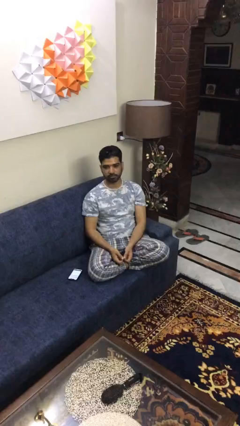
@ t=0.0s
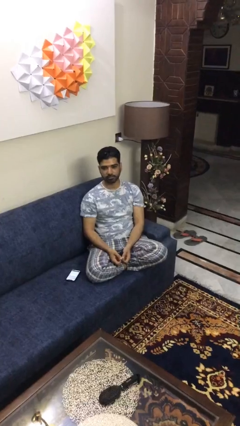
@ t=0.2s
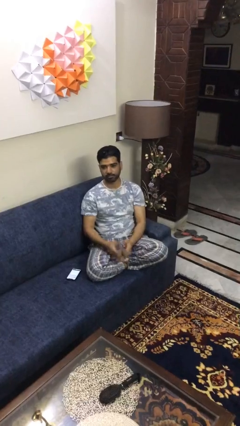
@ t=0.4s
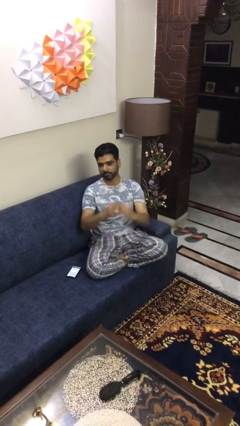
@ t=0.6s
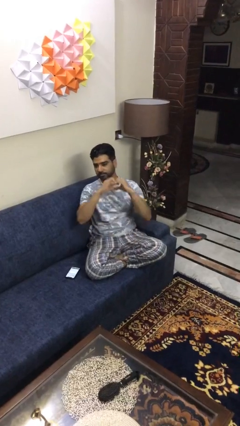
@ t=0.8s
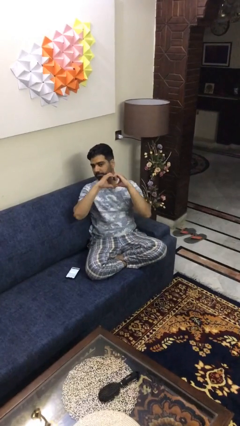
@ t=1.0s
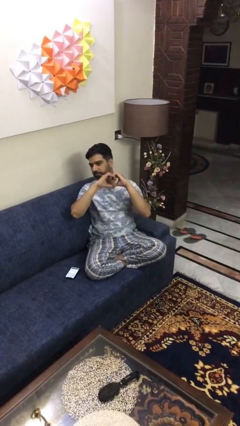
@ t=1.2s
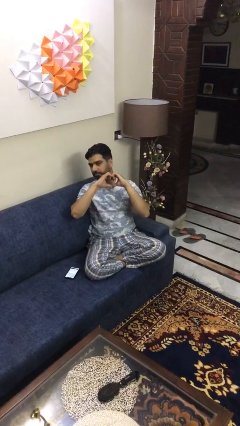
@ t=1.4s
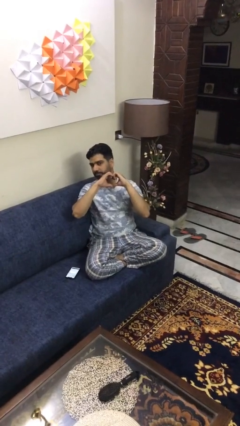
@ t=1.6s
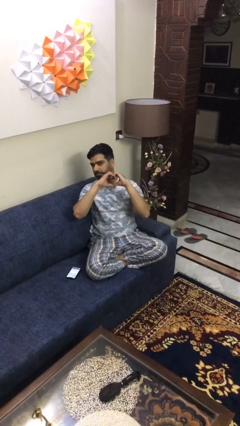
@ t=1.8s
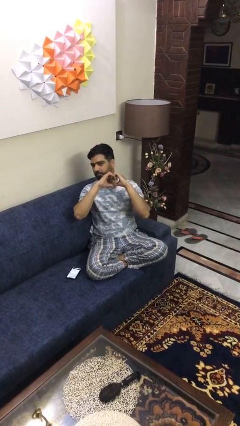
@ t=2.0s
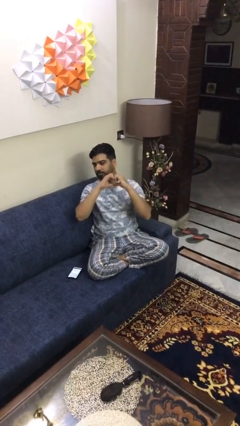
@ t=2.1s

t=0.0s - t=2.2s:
person gestures heart

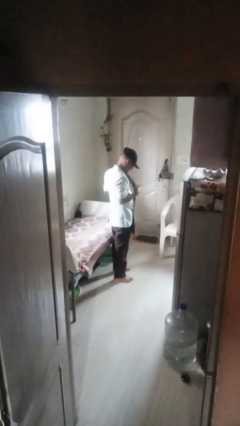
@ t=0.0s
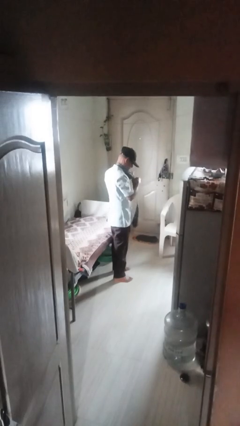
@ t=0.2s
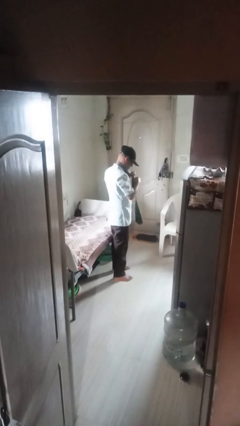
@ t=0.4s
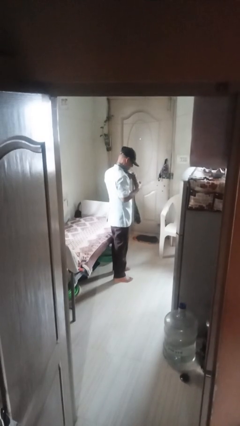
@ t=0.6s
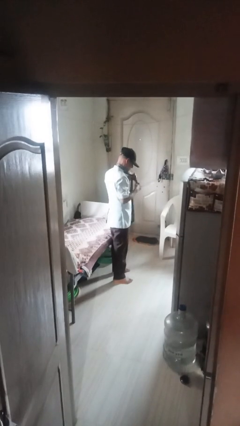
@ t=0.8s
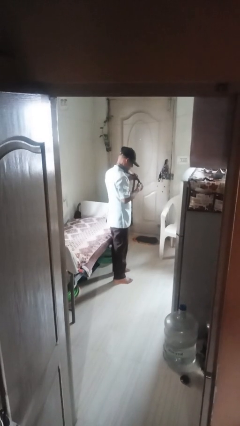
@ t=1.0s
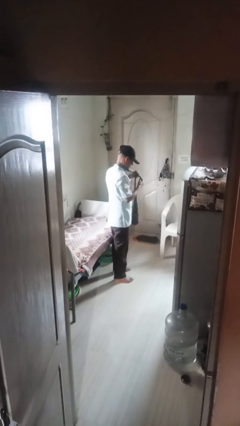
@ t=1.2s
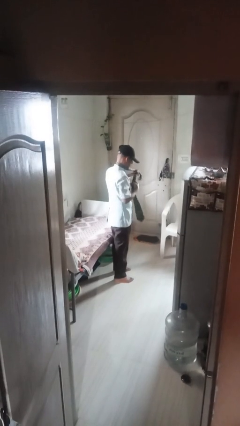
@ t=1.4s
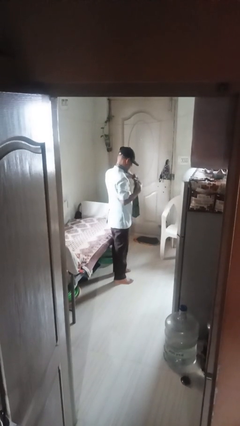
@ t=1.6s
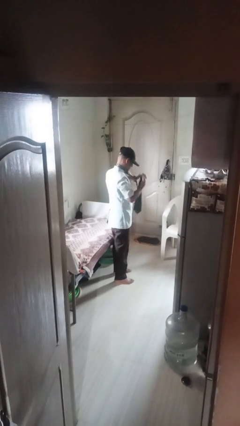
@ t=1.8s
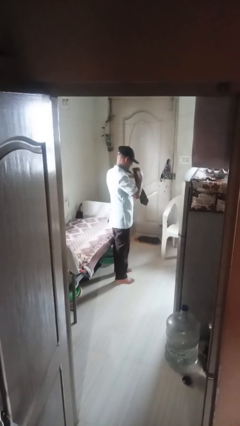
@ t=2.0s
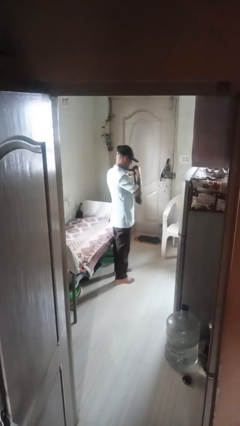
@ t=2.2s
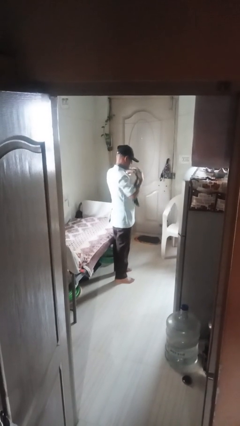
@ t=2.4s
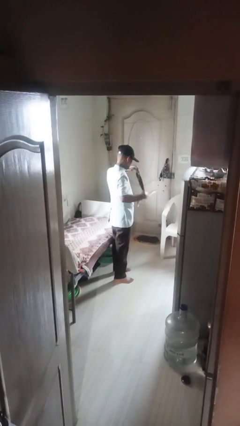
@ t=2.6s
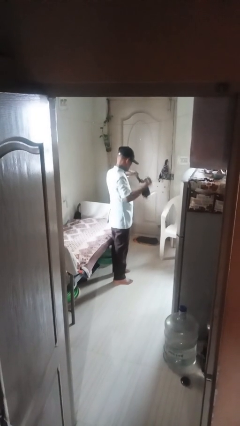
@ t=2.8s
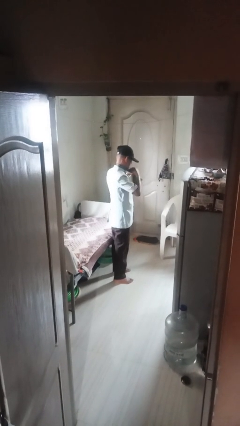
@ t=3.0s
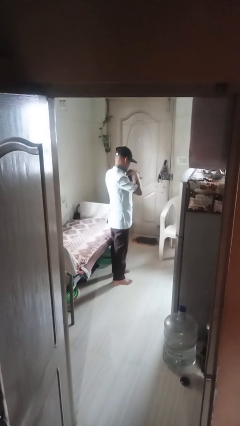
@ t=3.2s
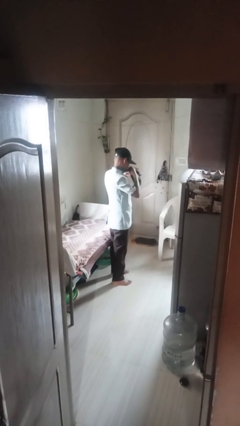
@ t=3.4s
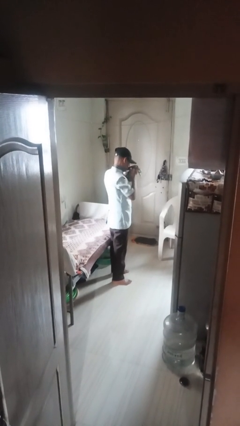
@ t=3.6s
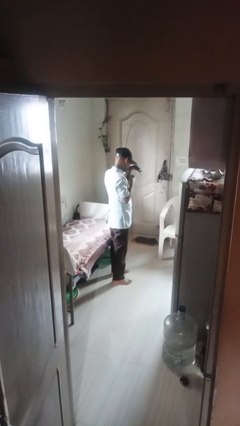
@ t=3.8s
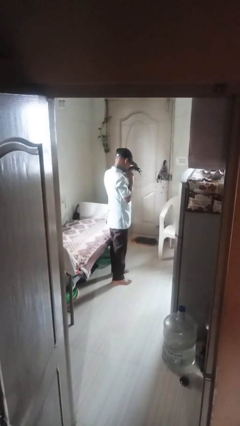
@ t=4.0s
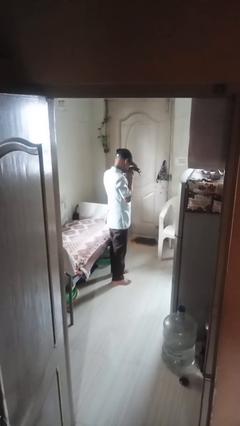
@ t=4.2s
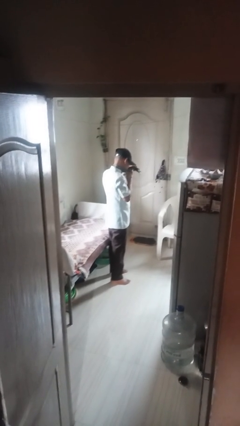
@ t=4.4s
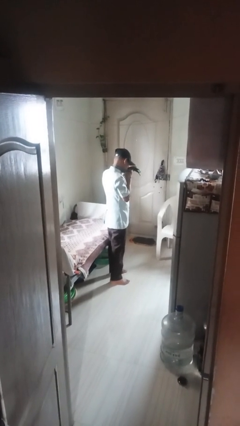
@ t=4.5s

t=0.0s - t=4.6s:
person puts on necktie

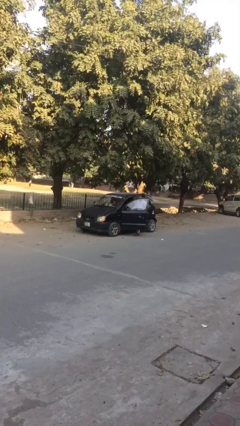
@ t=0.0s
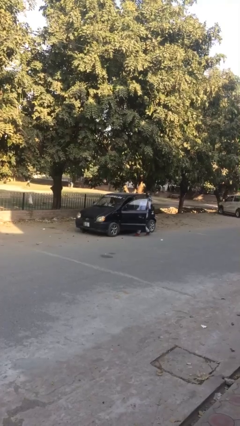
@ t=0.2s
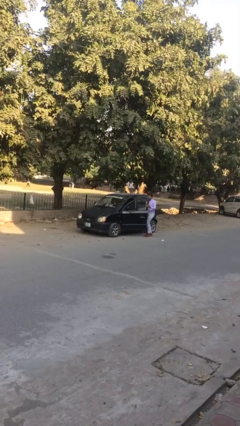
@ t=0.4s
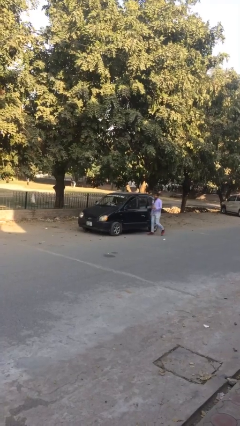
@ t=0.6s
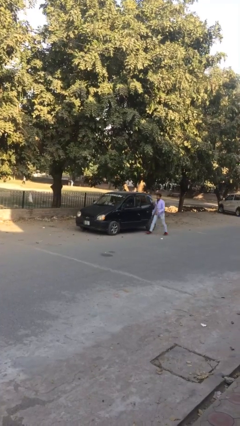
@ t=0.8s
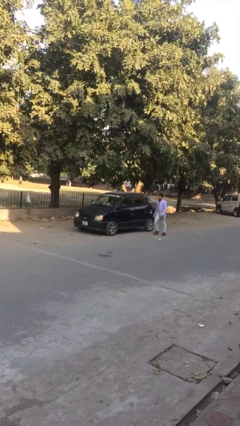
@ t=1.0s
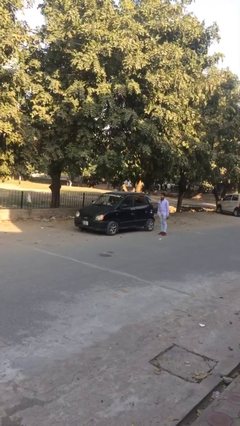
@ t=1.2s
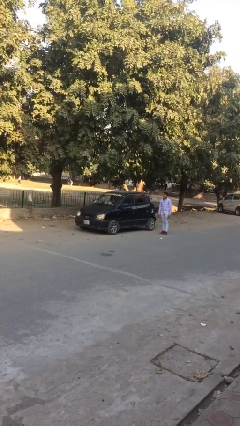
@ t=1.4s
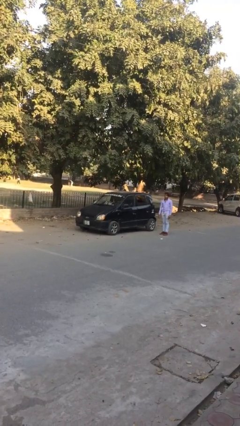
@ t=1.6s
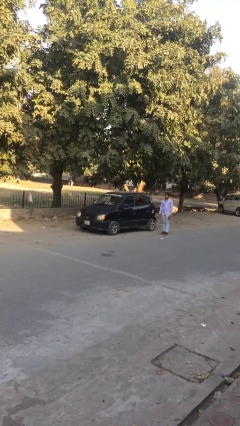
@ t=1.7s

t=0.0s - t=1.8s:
car drops off person

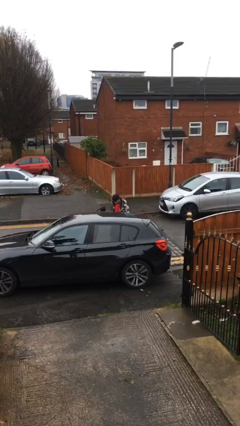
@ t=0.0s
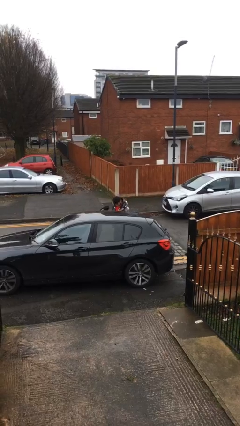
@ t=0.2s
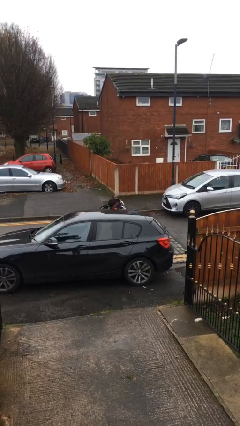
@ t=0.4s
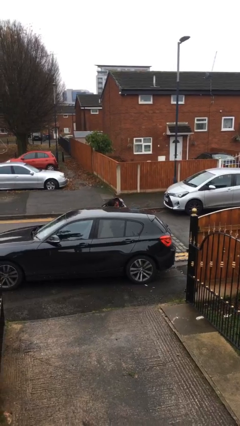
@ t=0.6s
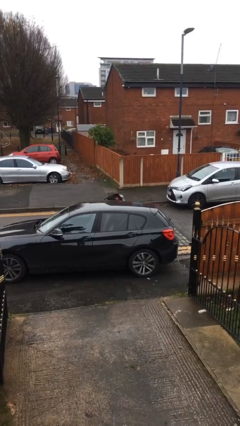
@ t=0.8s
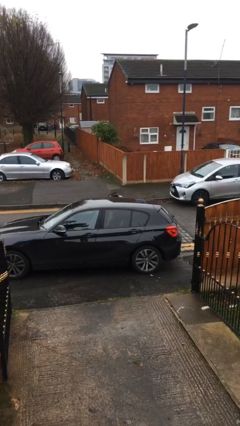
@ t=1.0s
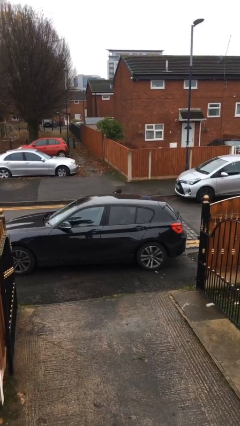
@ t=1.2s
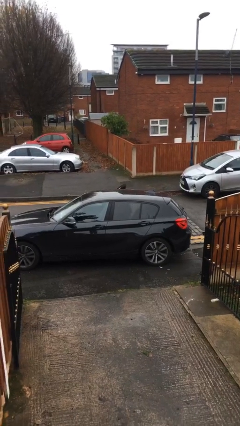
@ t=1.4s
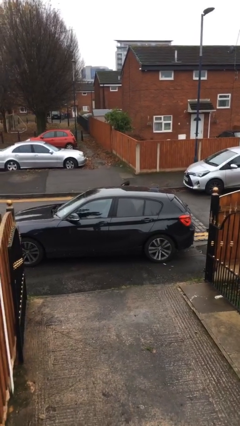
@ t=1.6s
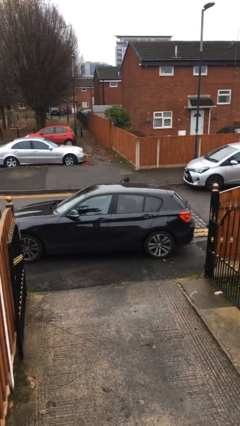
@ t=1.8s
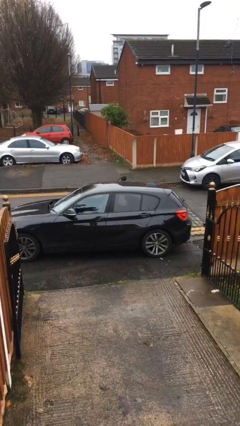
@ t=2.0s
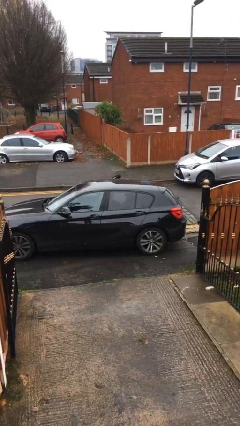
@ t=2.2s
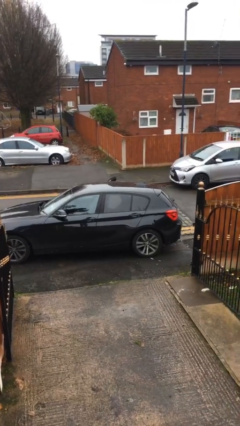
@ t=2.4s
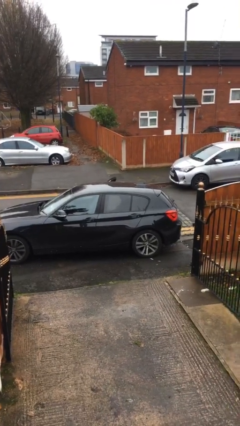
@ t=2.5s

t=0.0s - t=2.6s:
person enters car

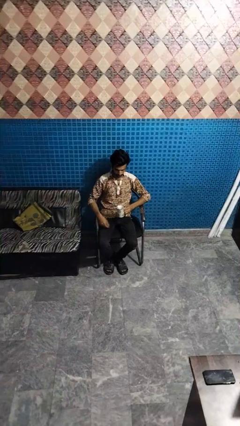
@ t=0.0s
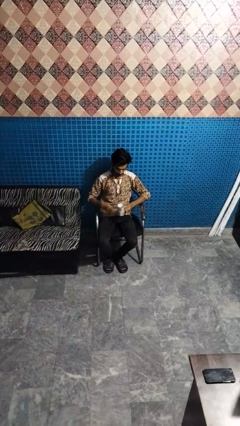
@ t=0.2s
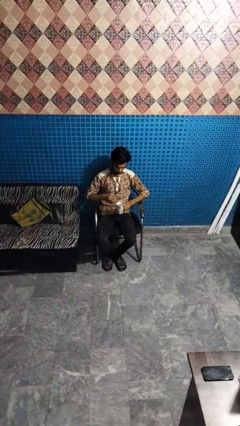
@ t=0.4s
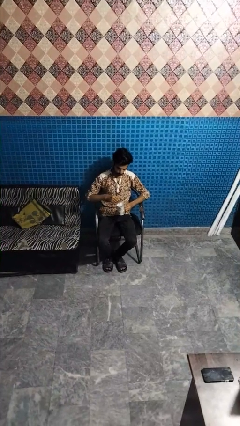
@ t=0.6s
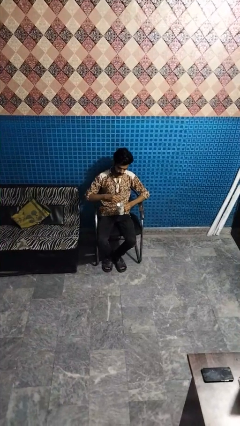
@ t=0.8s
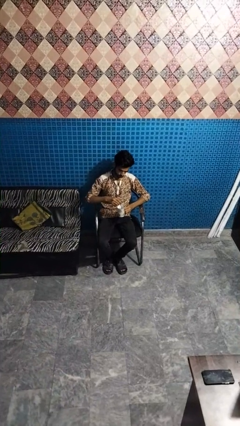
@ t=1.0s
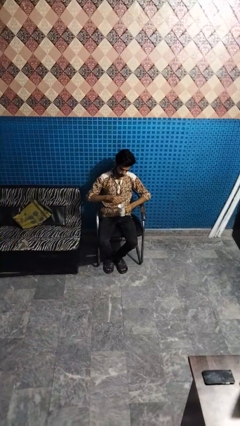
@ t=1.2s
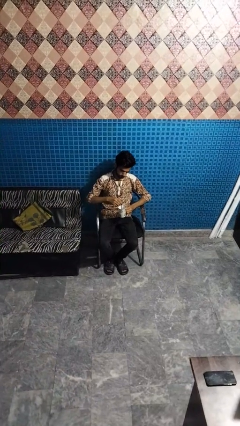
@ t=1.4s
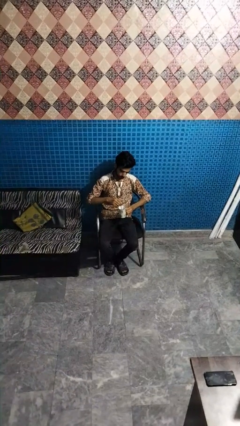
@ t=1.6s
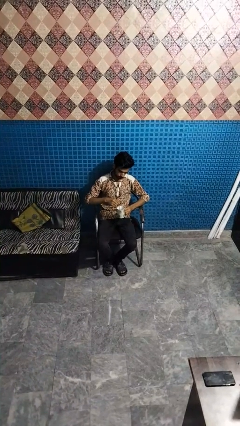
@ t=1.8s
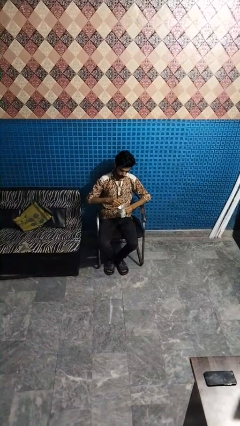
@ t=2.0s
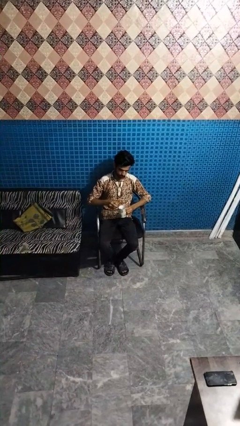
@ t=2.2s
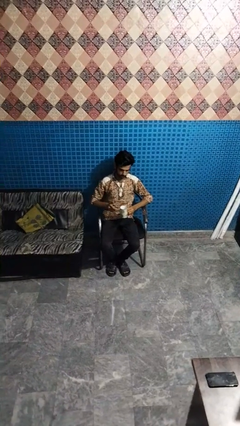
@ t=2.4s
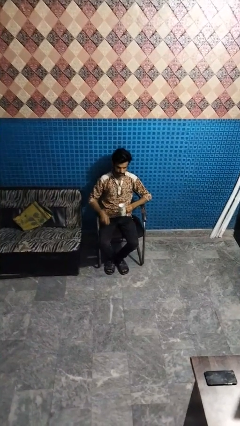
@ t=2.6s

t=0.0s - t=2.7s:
person stirs mug

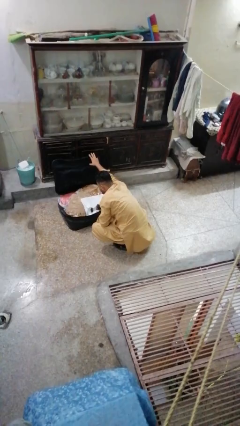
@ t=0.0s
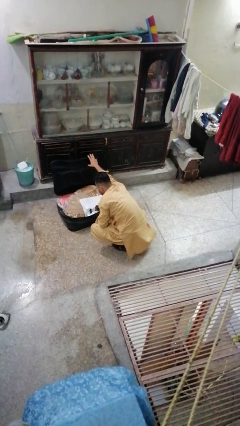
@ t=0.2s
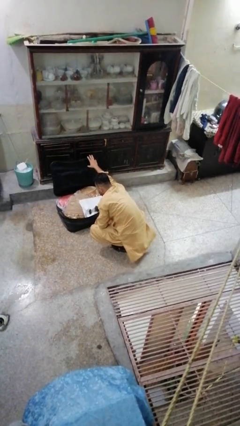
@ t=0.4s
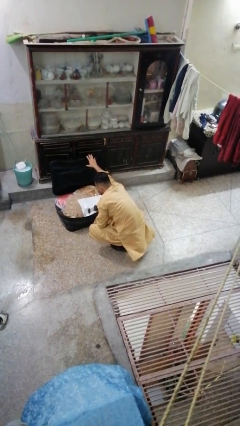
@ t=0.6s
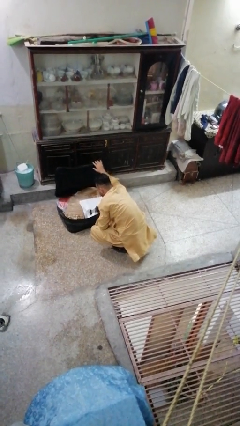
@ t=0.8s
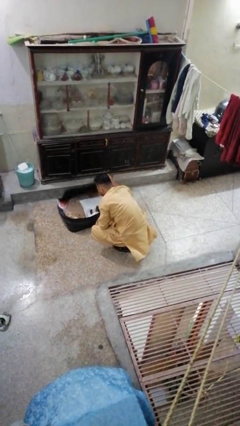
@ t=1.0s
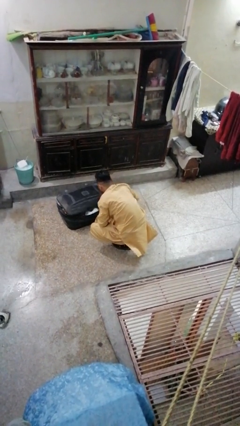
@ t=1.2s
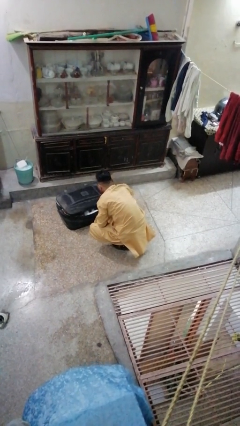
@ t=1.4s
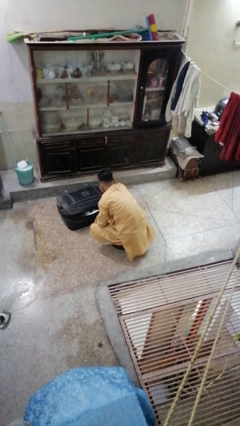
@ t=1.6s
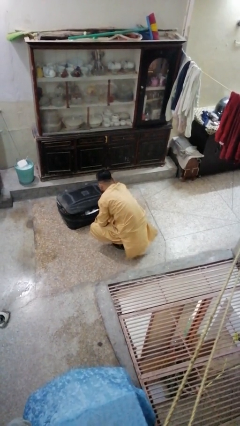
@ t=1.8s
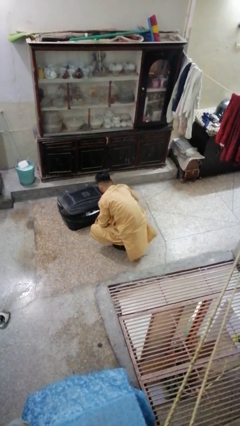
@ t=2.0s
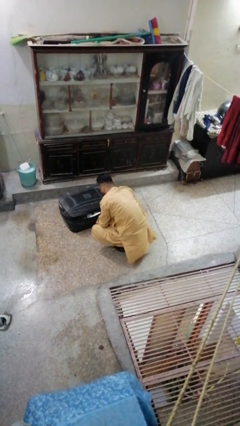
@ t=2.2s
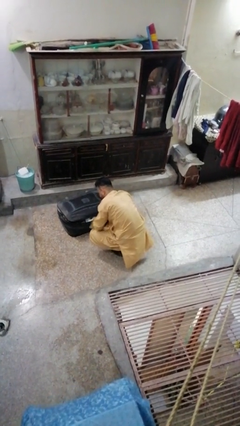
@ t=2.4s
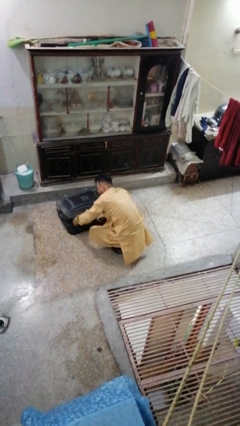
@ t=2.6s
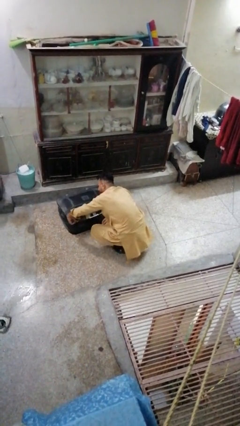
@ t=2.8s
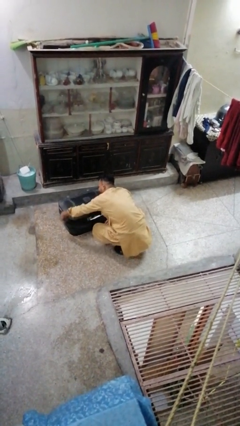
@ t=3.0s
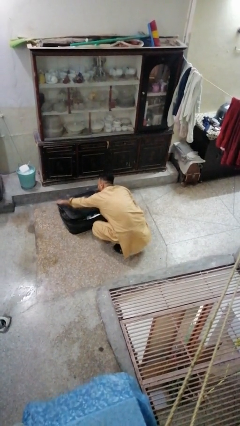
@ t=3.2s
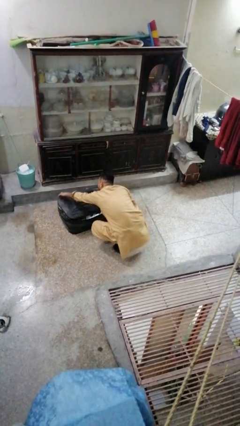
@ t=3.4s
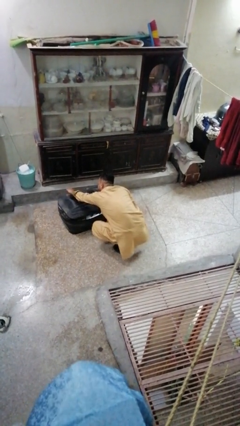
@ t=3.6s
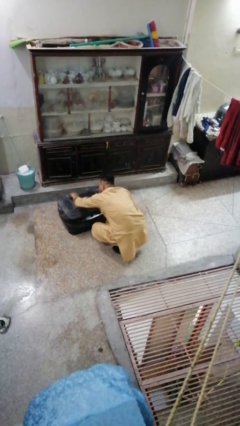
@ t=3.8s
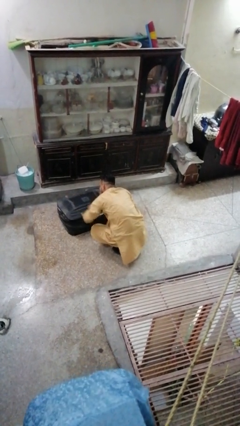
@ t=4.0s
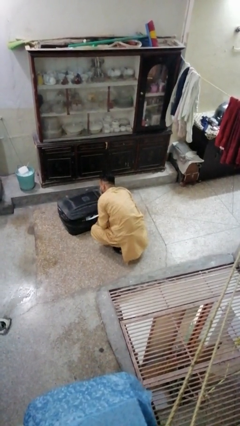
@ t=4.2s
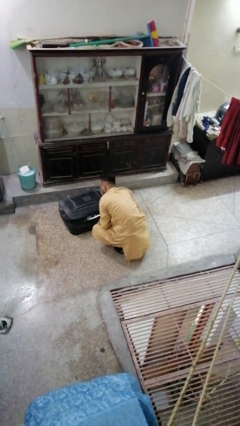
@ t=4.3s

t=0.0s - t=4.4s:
person closes suitcase
